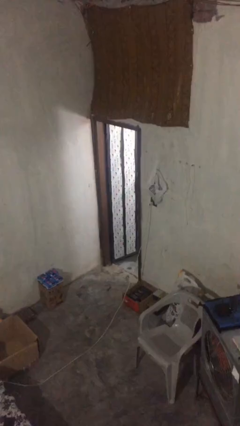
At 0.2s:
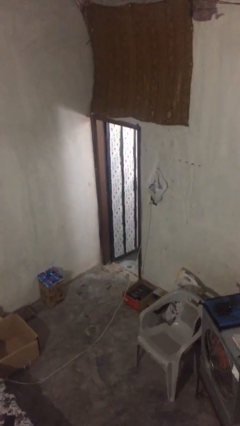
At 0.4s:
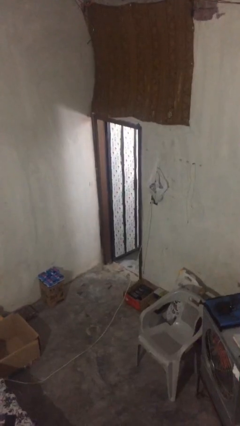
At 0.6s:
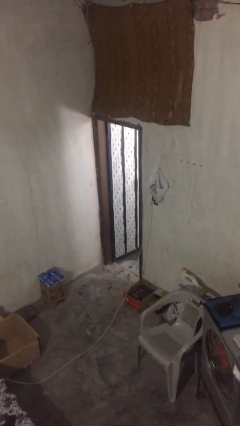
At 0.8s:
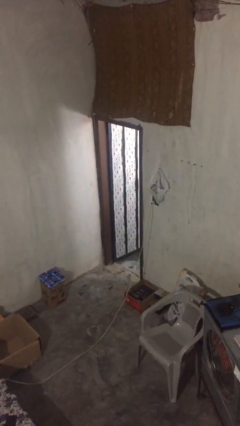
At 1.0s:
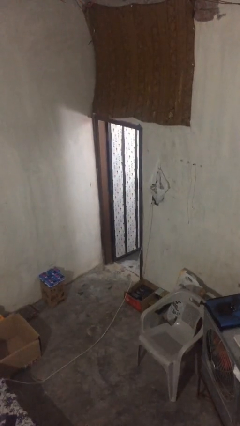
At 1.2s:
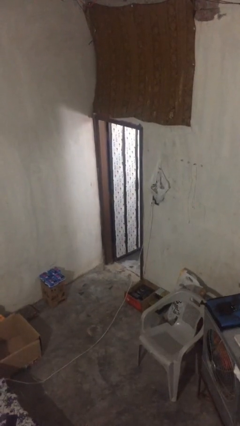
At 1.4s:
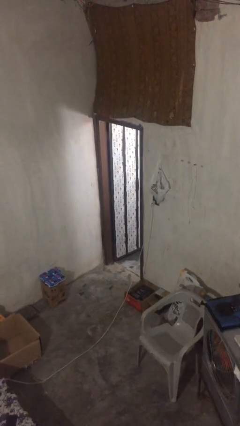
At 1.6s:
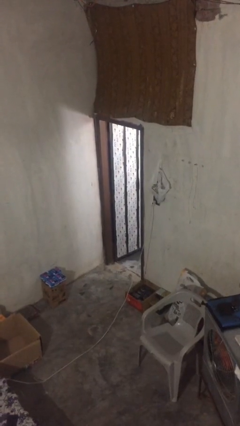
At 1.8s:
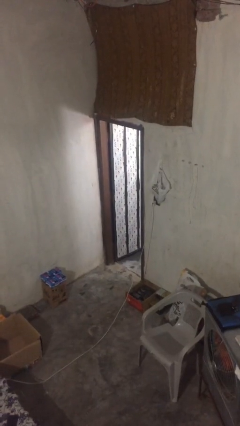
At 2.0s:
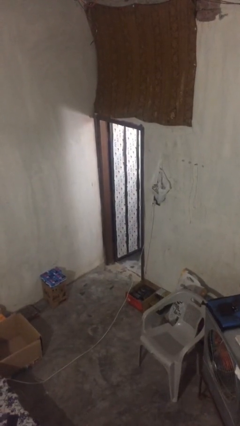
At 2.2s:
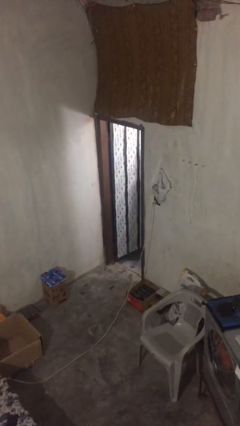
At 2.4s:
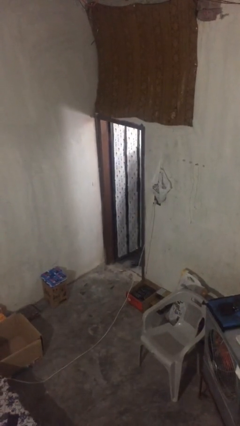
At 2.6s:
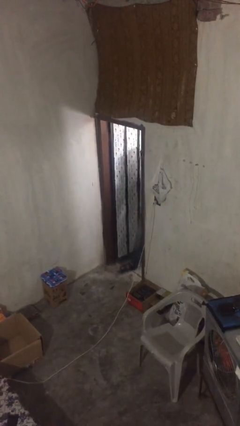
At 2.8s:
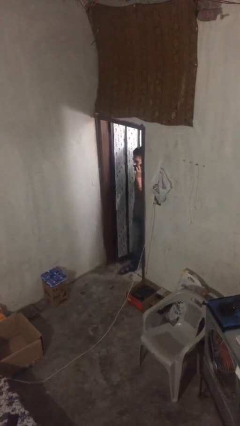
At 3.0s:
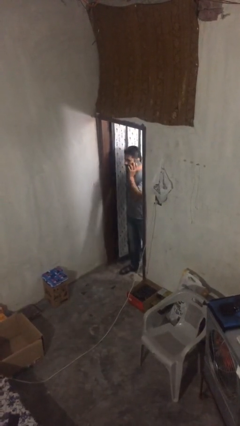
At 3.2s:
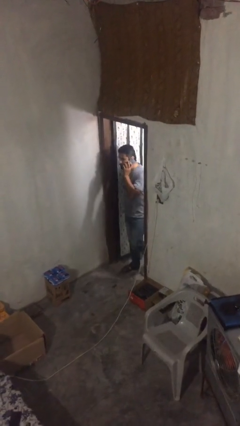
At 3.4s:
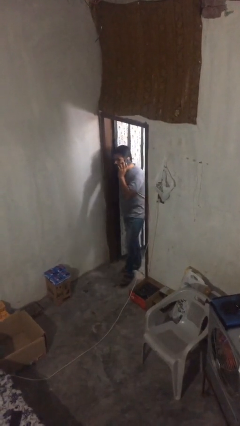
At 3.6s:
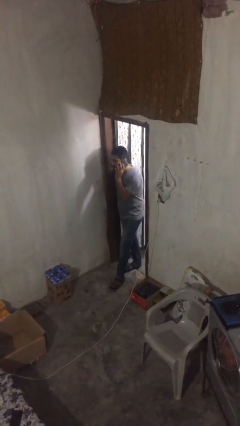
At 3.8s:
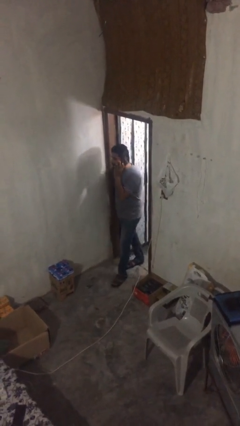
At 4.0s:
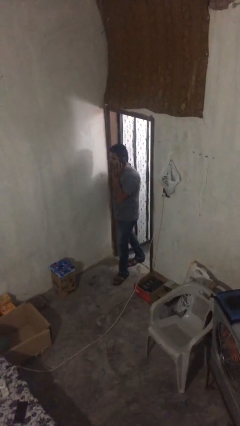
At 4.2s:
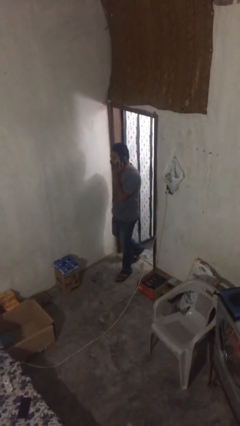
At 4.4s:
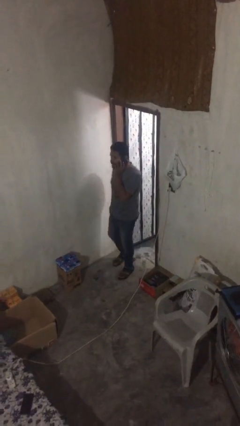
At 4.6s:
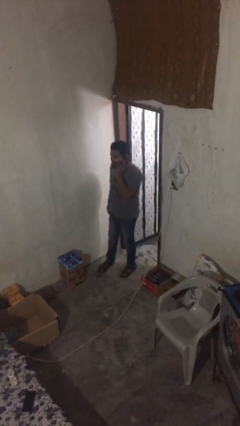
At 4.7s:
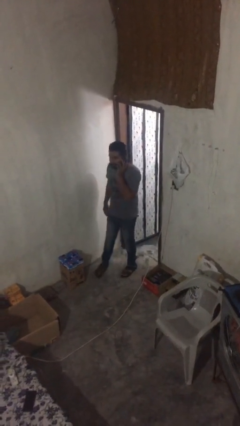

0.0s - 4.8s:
person enters scene through structure

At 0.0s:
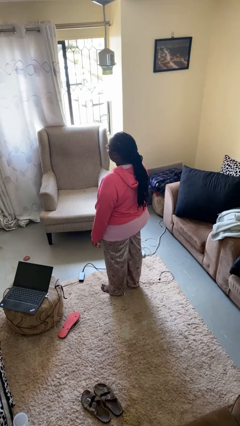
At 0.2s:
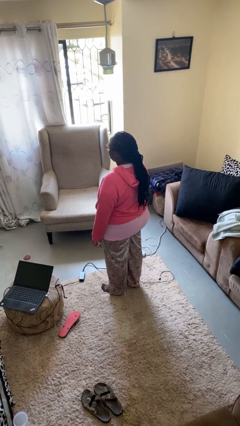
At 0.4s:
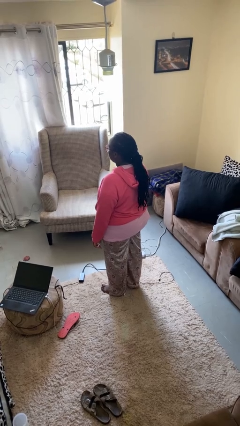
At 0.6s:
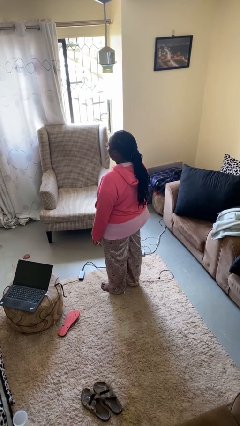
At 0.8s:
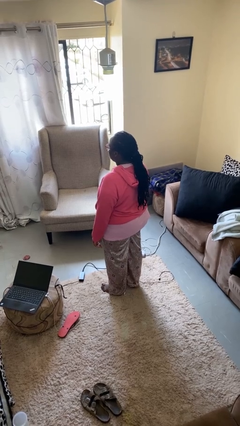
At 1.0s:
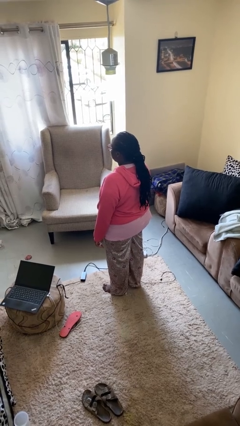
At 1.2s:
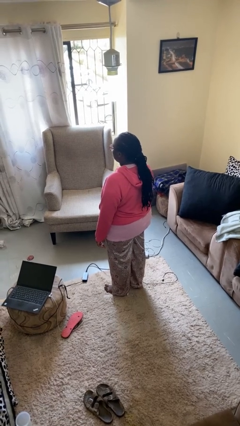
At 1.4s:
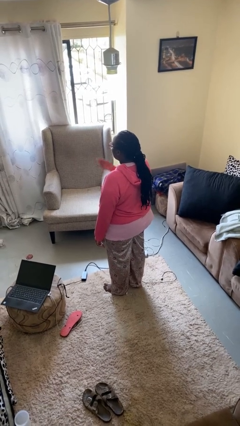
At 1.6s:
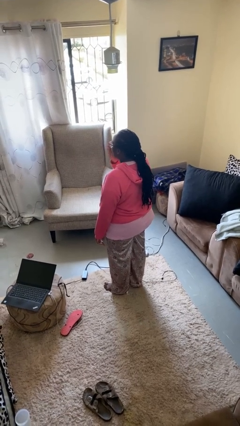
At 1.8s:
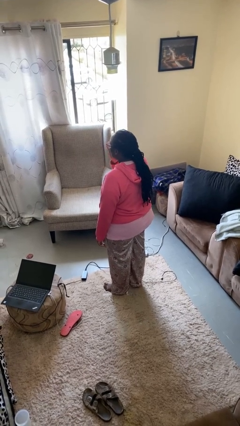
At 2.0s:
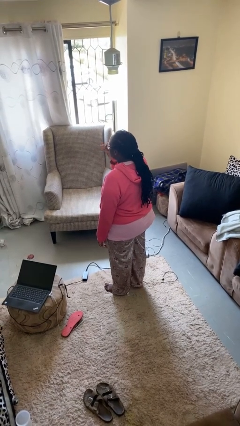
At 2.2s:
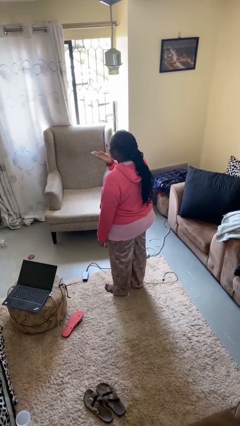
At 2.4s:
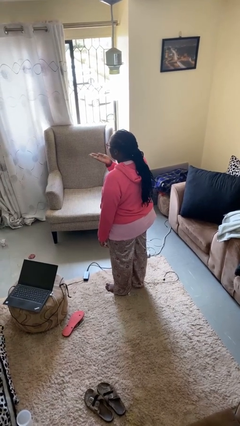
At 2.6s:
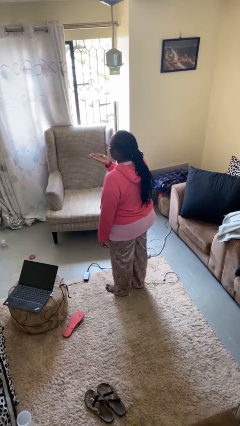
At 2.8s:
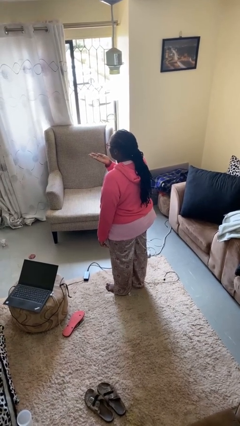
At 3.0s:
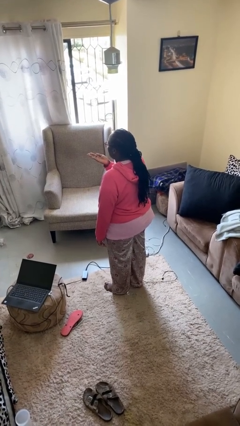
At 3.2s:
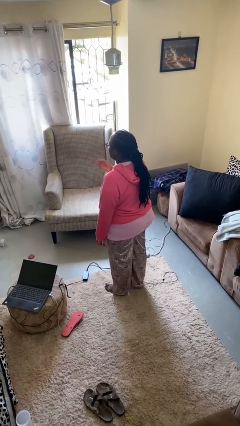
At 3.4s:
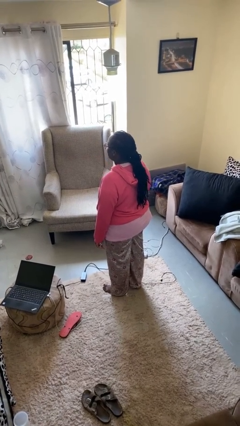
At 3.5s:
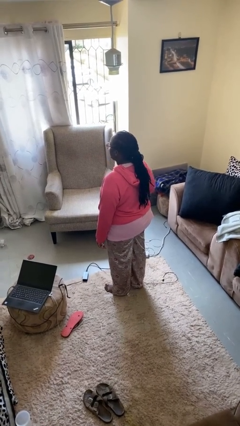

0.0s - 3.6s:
person gestures blow kiss

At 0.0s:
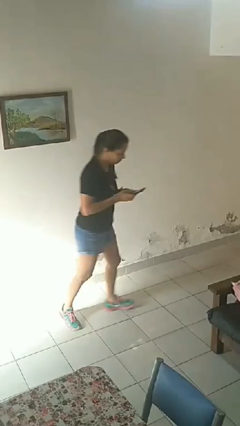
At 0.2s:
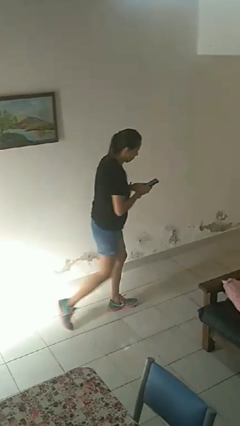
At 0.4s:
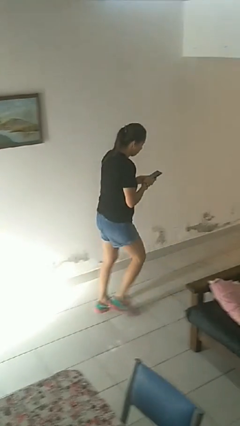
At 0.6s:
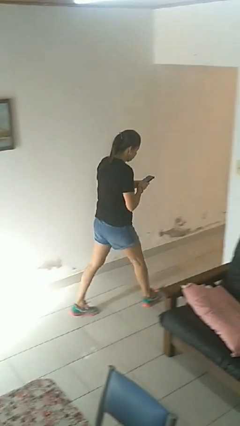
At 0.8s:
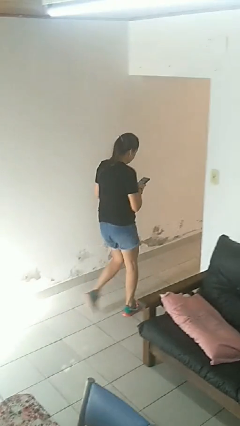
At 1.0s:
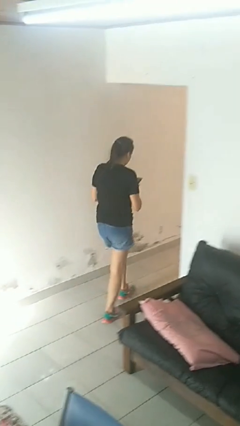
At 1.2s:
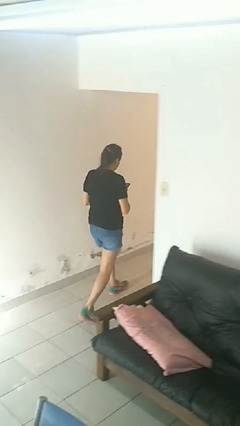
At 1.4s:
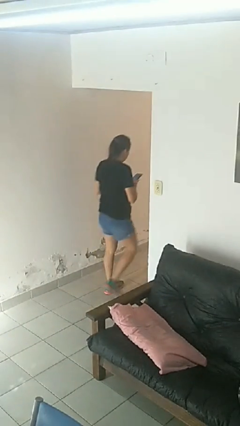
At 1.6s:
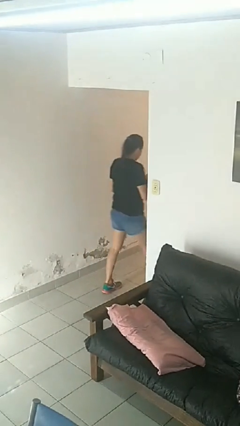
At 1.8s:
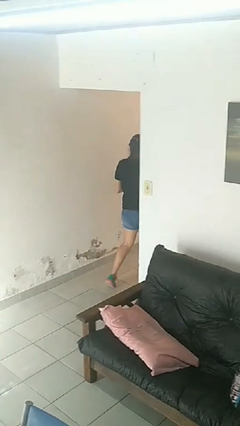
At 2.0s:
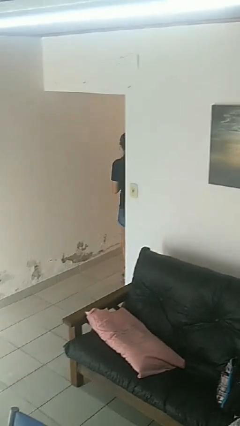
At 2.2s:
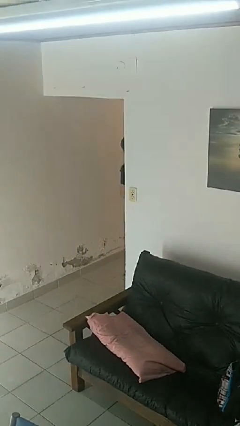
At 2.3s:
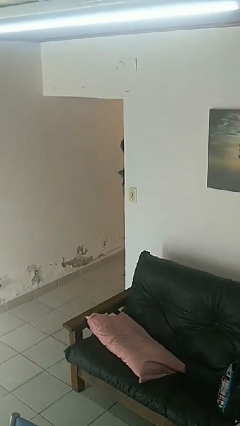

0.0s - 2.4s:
person exits scene through structure

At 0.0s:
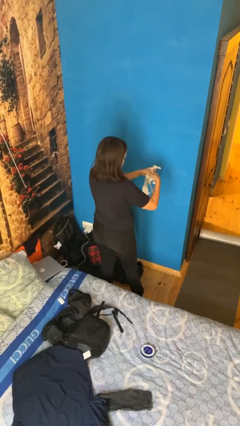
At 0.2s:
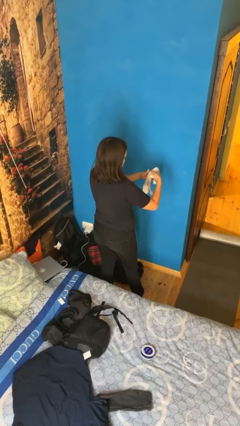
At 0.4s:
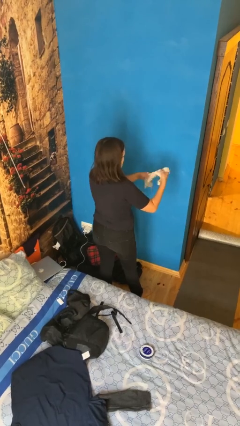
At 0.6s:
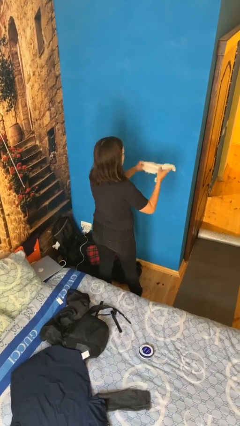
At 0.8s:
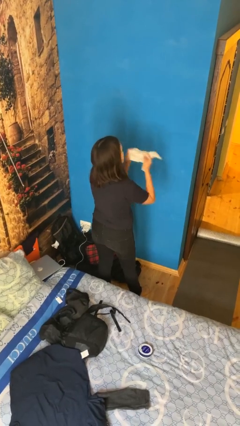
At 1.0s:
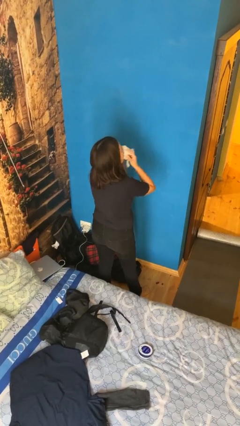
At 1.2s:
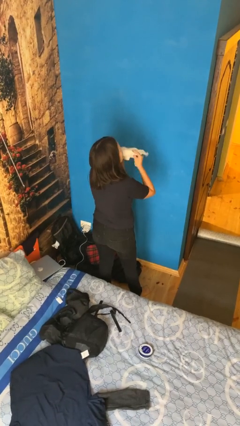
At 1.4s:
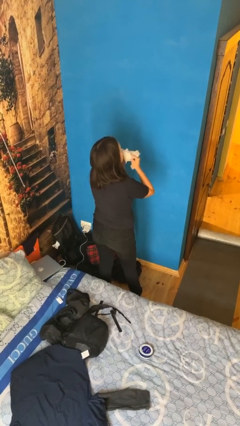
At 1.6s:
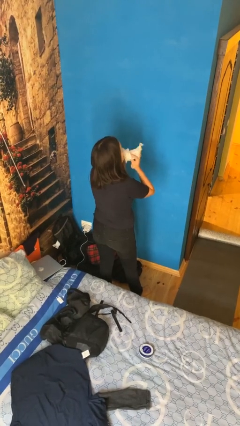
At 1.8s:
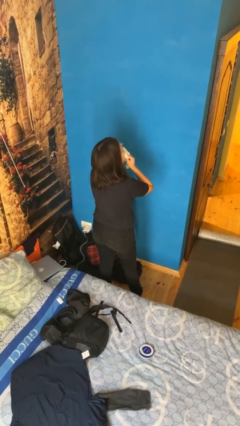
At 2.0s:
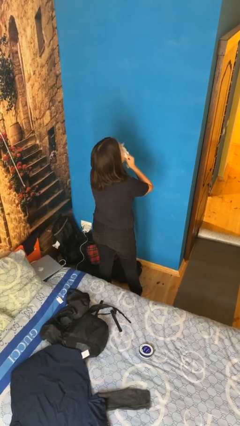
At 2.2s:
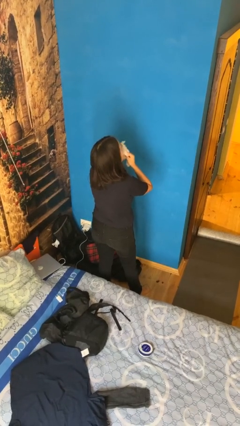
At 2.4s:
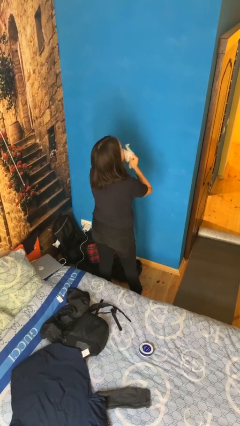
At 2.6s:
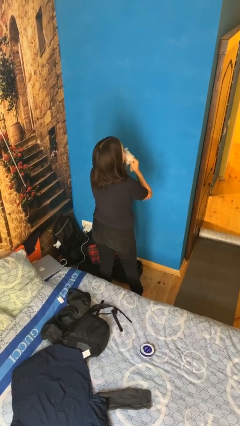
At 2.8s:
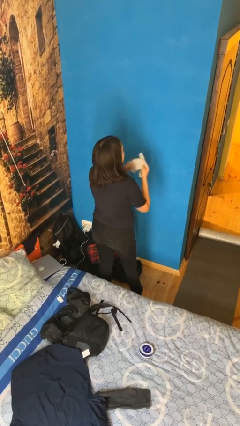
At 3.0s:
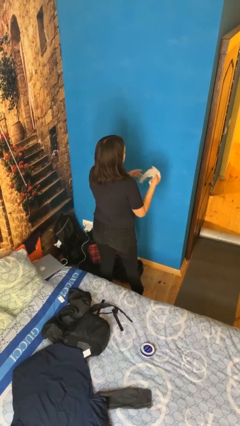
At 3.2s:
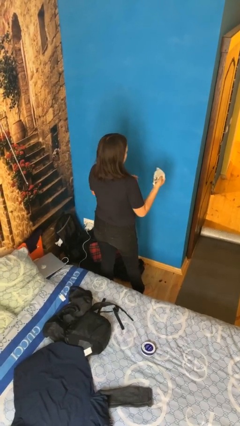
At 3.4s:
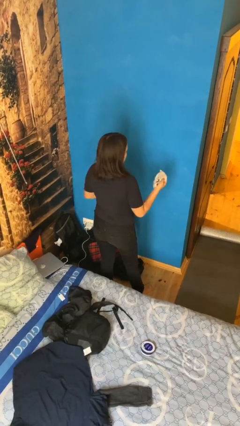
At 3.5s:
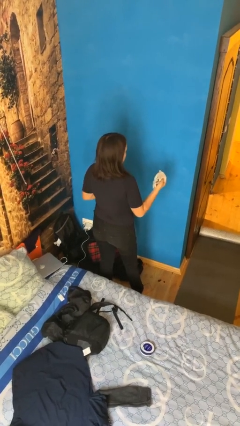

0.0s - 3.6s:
person wipes mouth with napkin

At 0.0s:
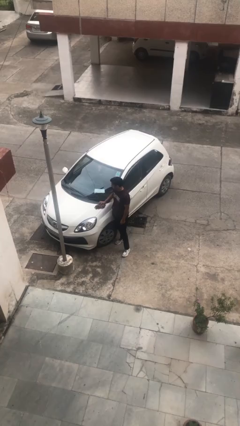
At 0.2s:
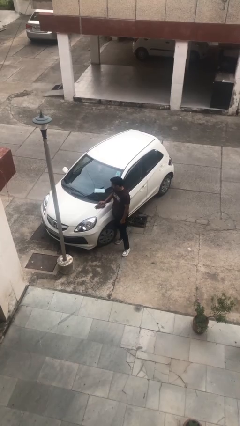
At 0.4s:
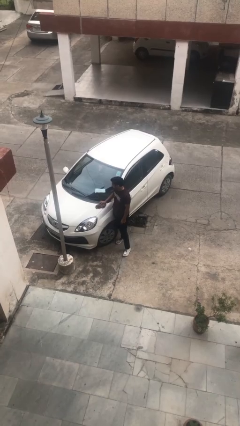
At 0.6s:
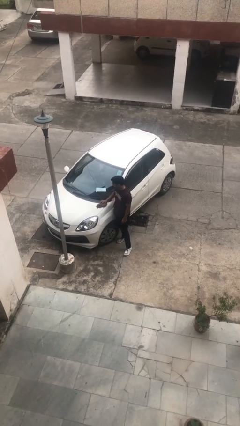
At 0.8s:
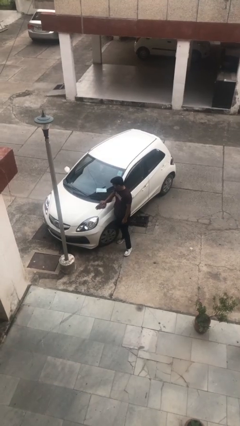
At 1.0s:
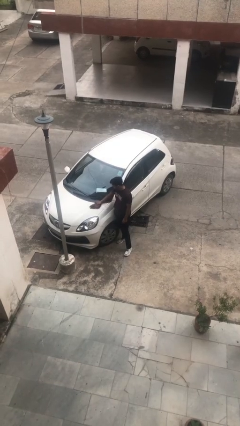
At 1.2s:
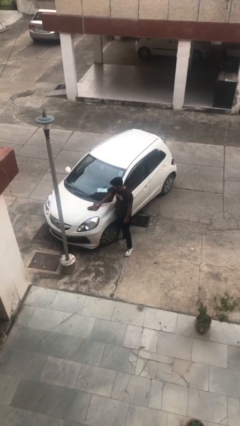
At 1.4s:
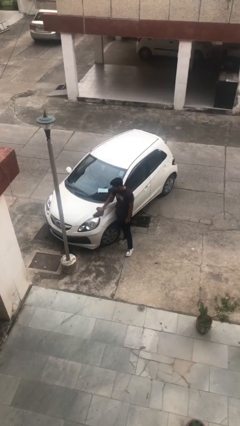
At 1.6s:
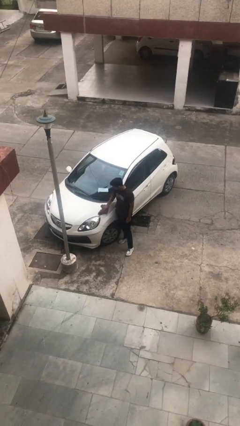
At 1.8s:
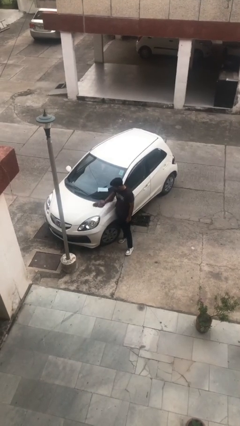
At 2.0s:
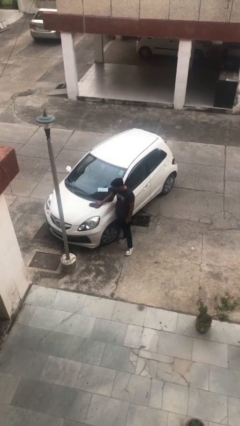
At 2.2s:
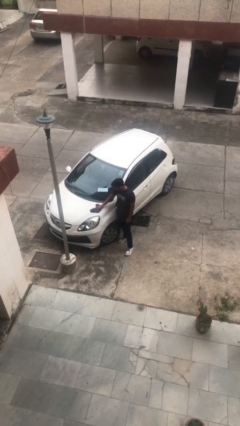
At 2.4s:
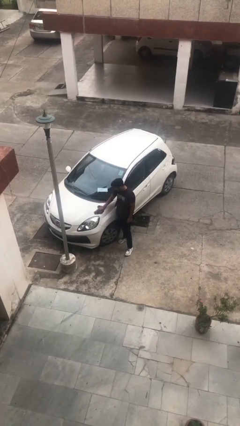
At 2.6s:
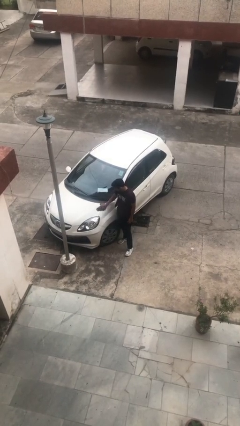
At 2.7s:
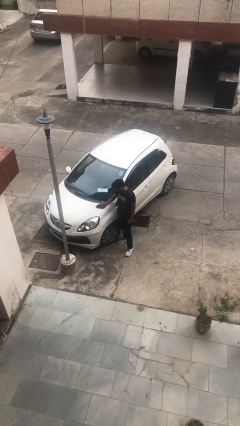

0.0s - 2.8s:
person polishes car with rag

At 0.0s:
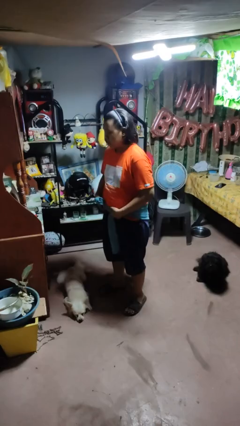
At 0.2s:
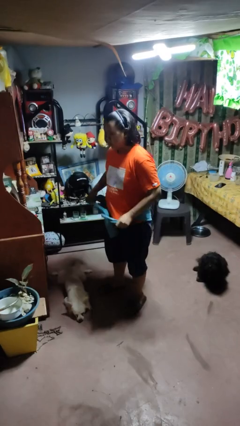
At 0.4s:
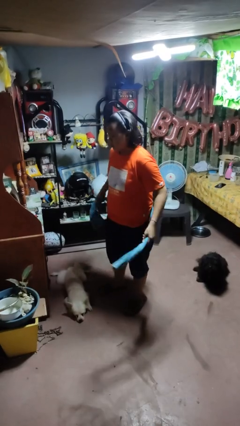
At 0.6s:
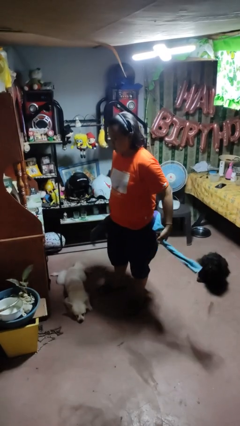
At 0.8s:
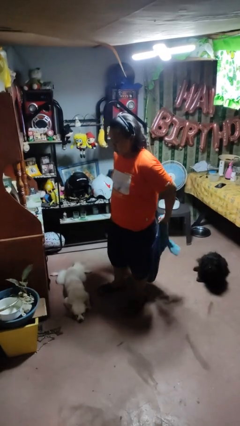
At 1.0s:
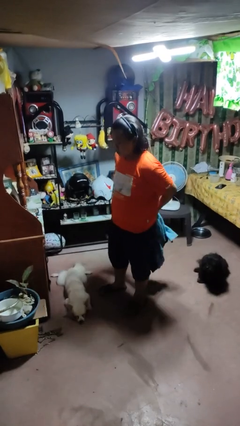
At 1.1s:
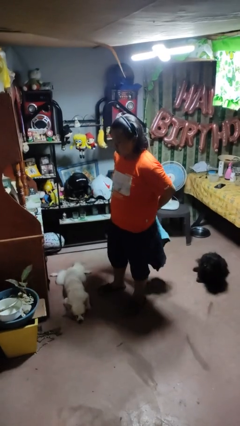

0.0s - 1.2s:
person unties jacket around waist
